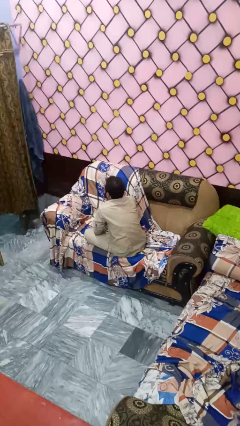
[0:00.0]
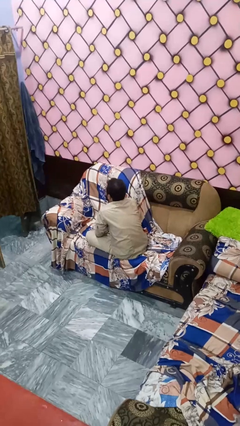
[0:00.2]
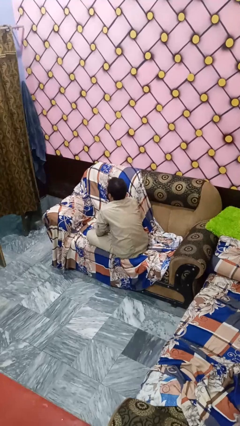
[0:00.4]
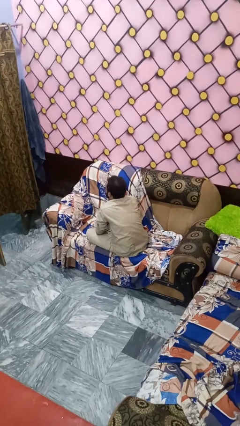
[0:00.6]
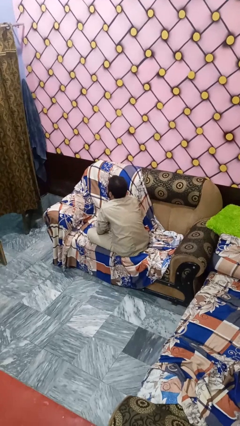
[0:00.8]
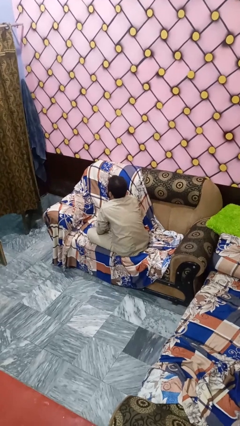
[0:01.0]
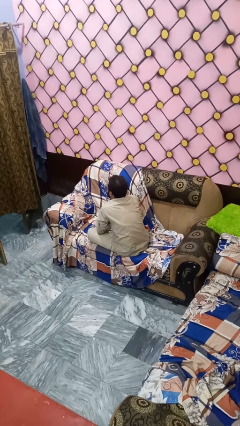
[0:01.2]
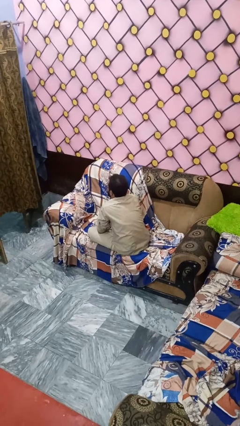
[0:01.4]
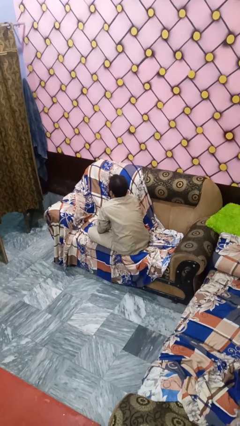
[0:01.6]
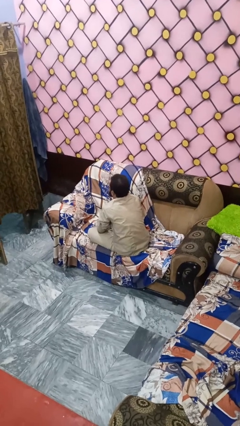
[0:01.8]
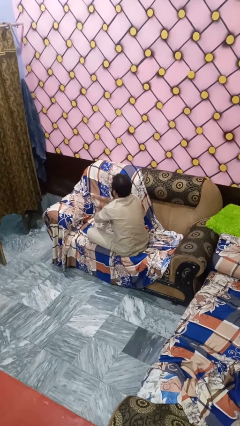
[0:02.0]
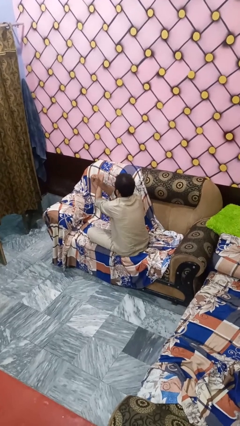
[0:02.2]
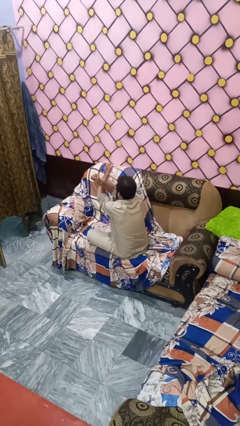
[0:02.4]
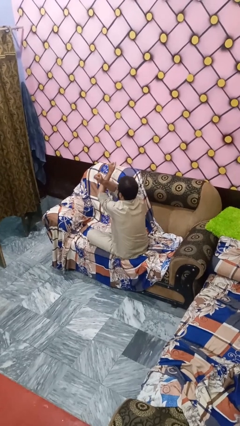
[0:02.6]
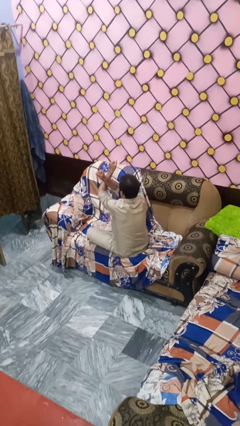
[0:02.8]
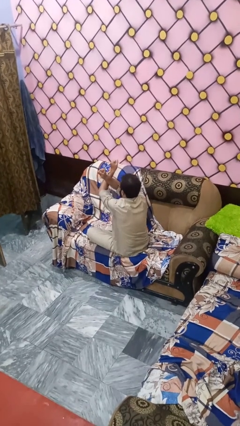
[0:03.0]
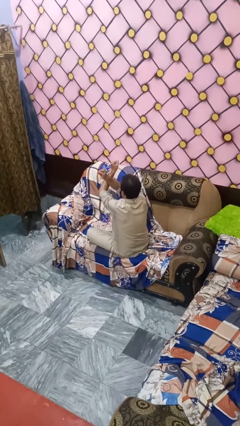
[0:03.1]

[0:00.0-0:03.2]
person gestures arms x

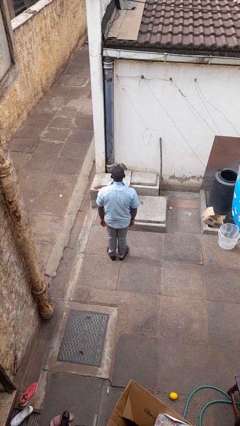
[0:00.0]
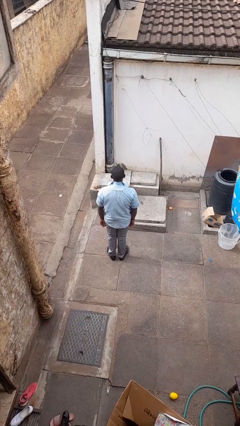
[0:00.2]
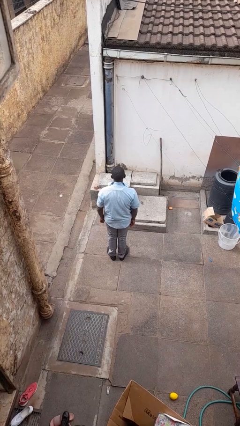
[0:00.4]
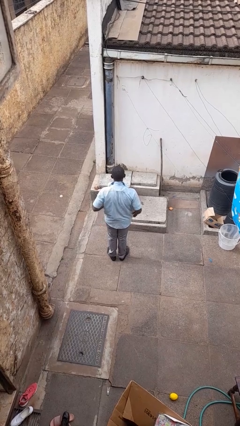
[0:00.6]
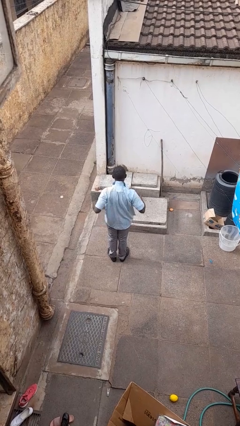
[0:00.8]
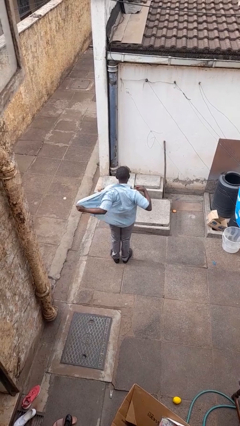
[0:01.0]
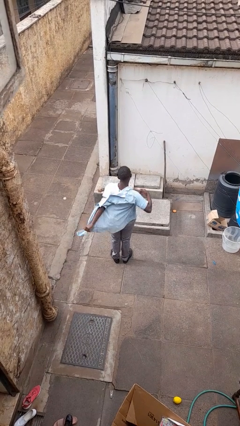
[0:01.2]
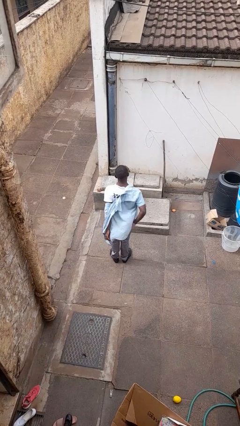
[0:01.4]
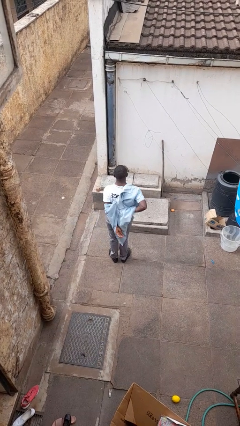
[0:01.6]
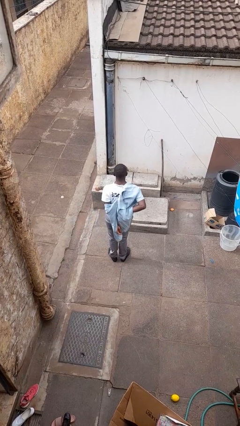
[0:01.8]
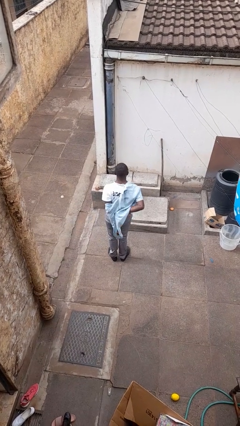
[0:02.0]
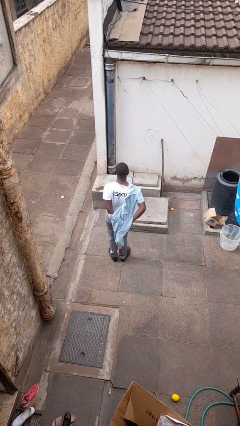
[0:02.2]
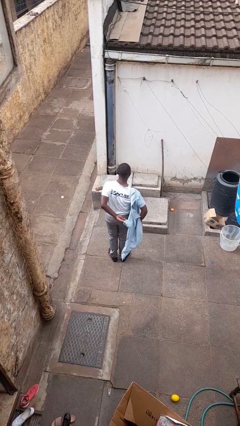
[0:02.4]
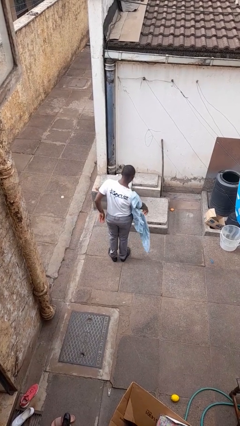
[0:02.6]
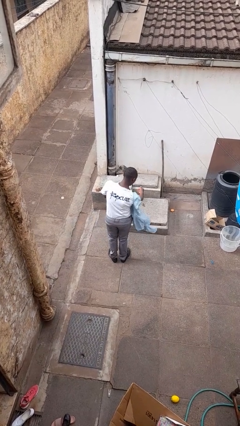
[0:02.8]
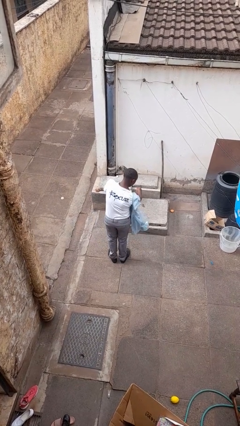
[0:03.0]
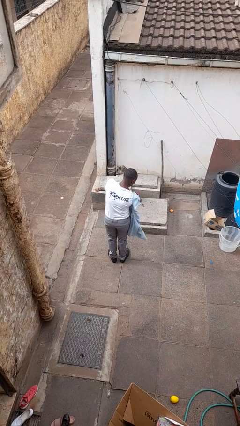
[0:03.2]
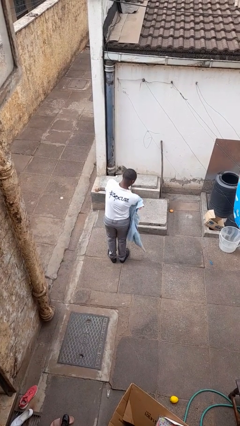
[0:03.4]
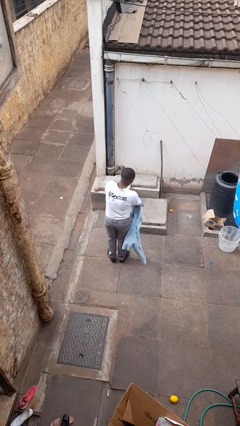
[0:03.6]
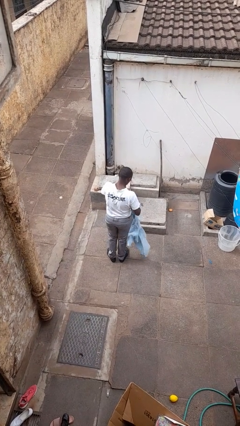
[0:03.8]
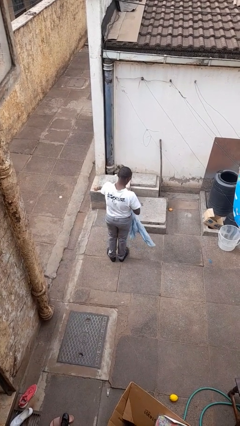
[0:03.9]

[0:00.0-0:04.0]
person takes off shirt

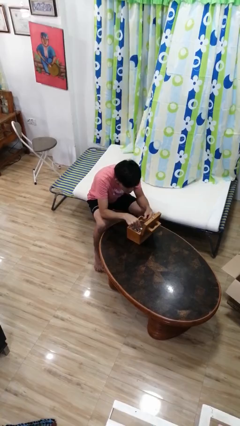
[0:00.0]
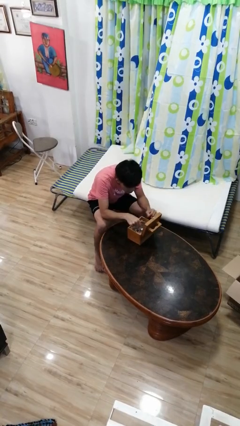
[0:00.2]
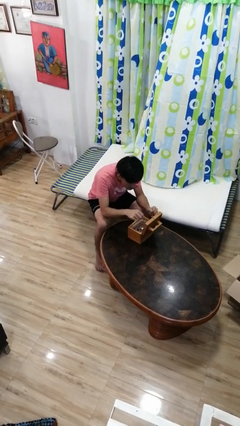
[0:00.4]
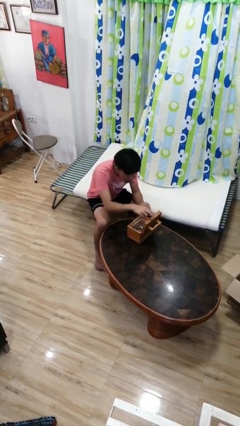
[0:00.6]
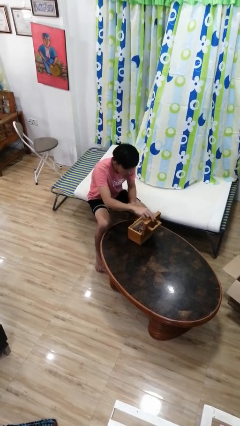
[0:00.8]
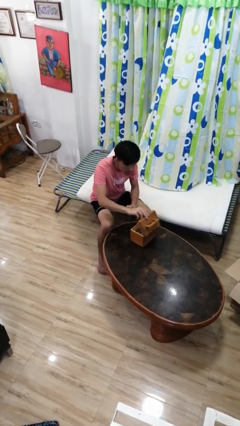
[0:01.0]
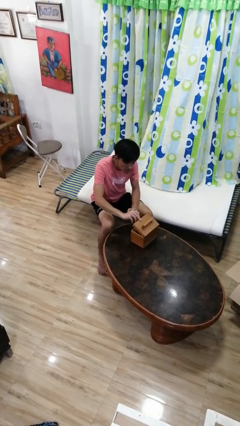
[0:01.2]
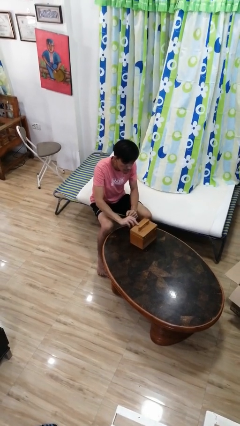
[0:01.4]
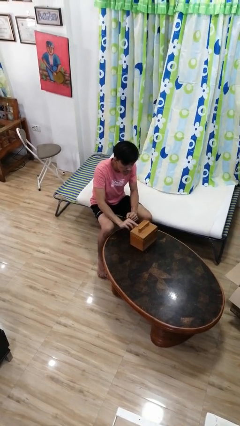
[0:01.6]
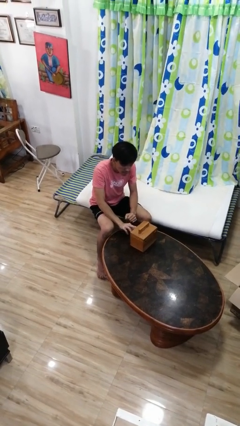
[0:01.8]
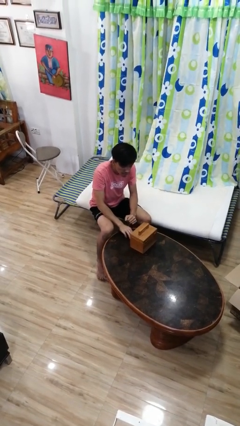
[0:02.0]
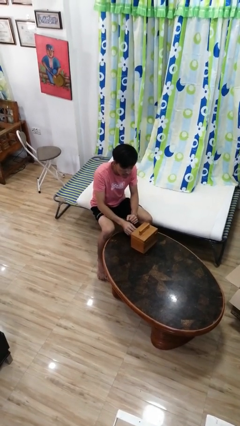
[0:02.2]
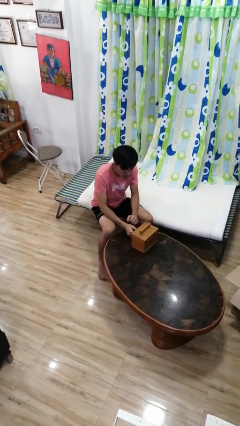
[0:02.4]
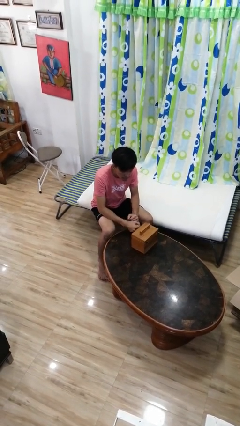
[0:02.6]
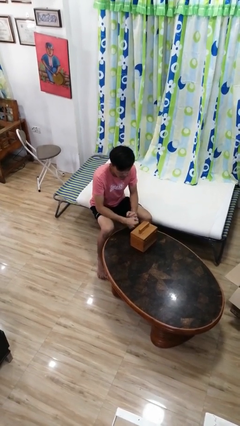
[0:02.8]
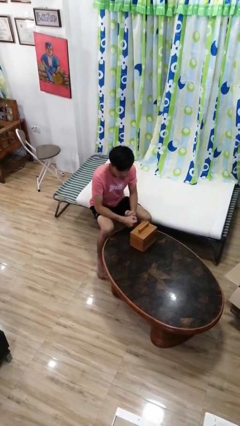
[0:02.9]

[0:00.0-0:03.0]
person closes jewelry box

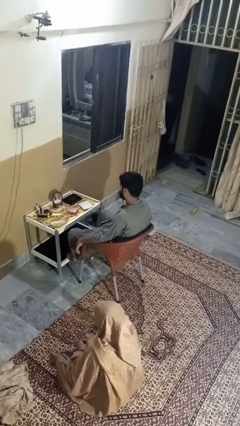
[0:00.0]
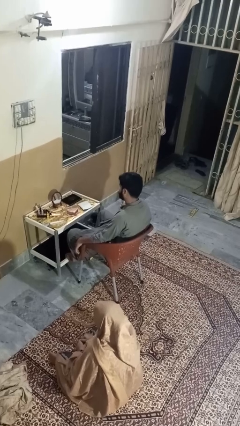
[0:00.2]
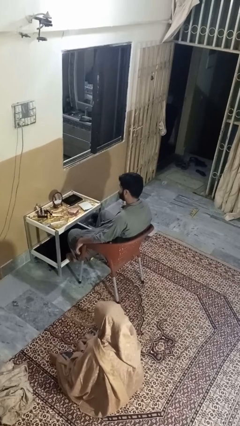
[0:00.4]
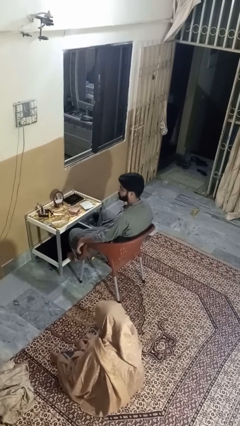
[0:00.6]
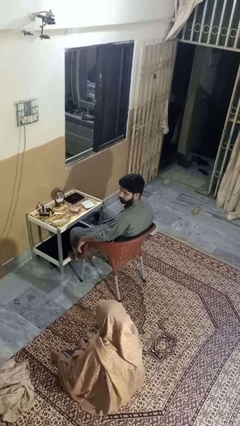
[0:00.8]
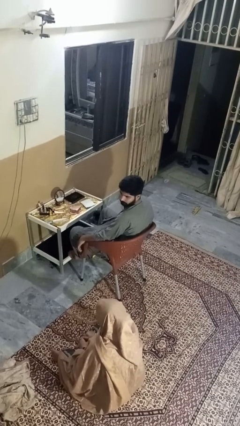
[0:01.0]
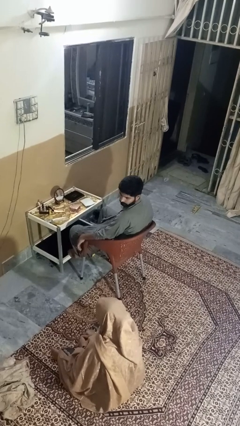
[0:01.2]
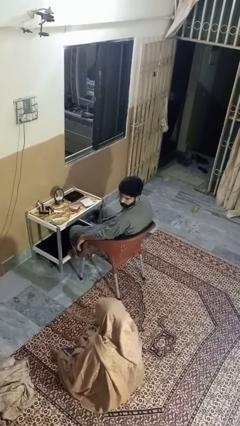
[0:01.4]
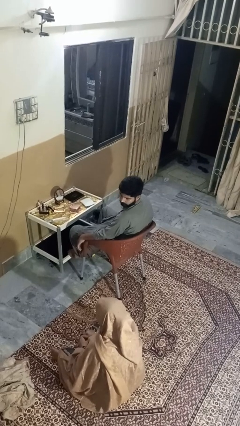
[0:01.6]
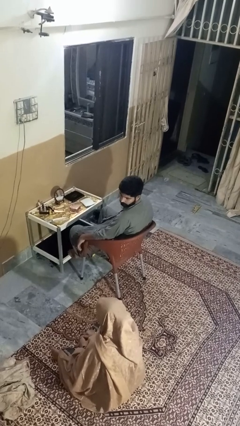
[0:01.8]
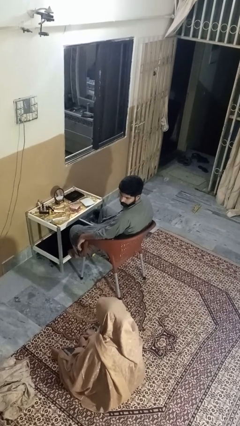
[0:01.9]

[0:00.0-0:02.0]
person looks over shoulder

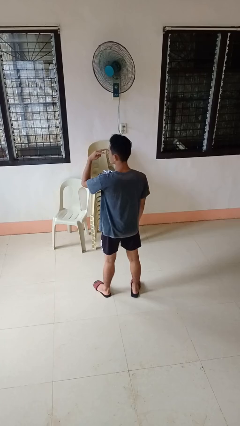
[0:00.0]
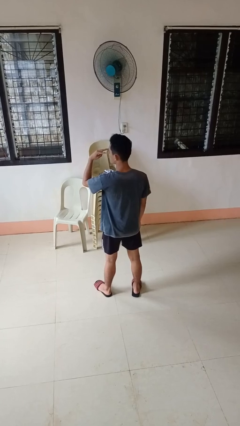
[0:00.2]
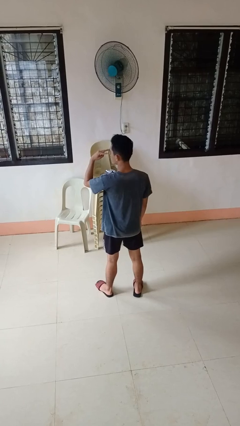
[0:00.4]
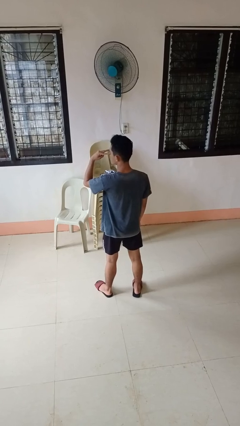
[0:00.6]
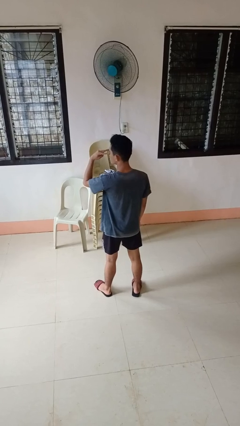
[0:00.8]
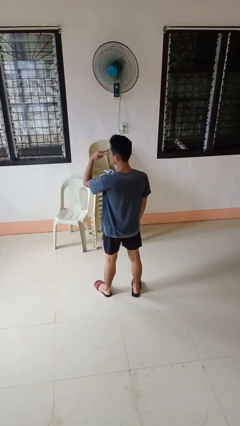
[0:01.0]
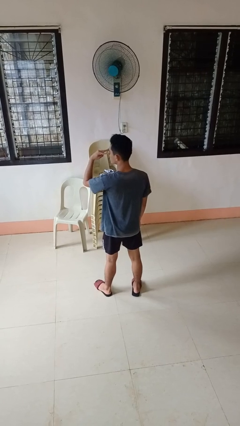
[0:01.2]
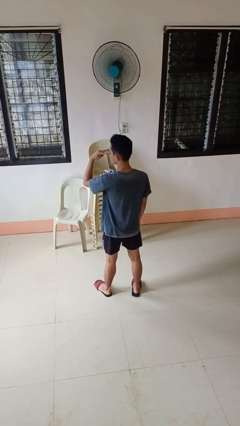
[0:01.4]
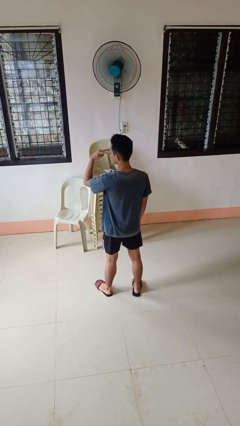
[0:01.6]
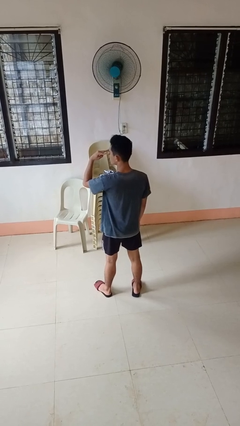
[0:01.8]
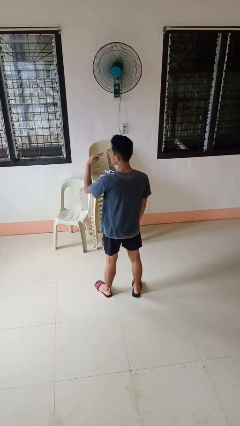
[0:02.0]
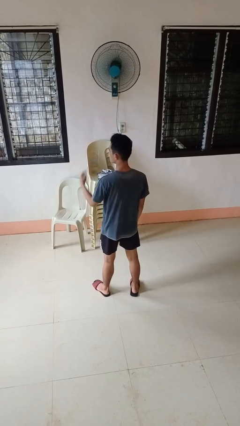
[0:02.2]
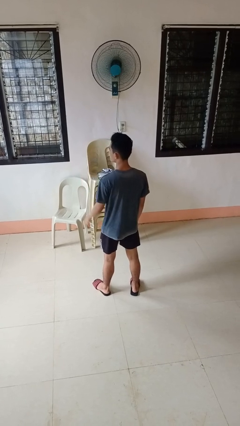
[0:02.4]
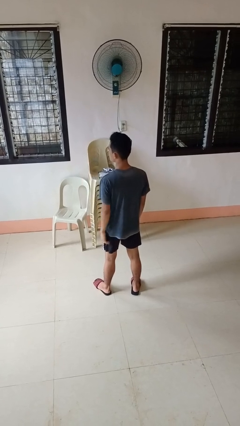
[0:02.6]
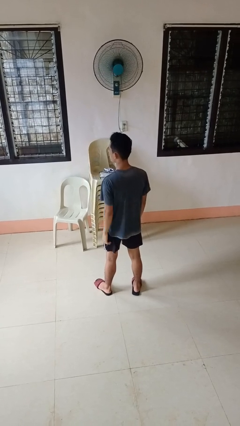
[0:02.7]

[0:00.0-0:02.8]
person gestures watch closely

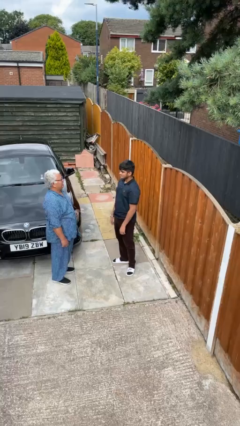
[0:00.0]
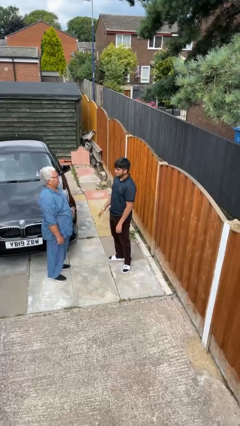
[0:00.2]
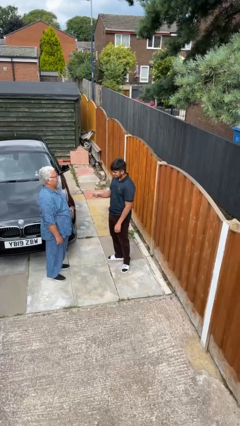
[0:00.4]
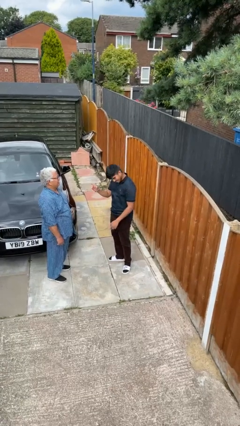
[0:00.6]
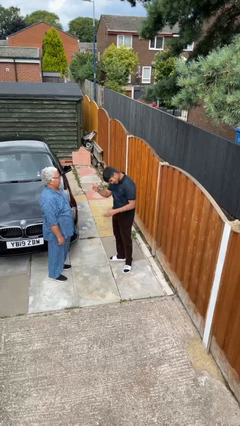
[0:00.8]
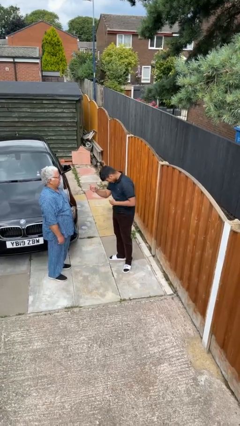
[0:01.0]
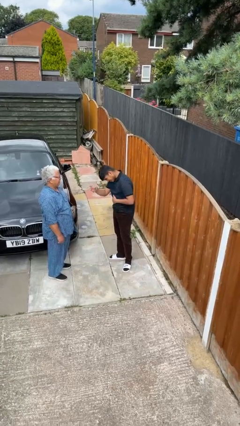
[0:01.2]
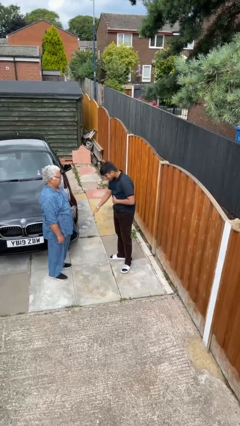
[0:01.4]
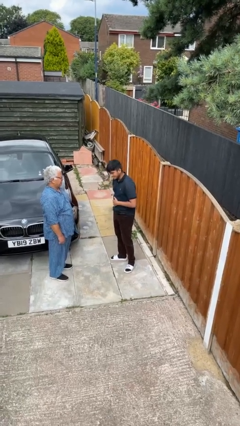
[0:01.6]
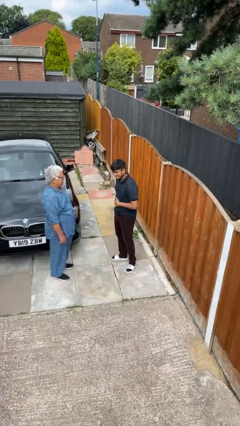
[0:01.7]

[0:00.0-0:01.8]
person laughs with person

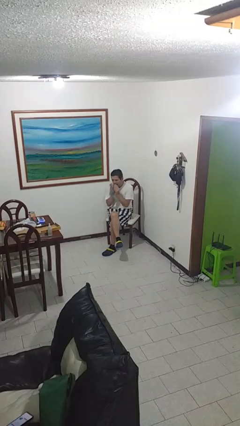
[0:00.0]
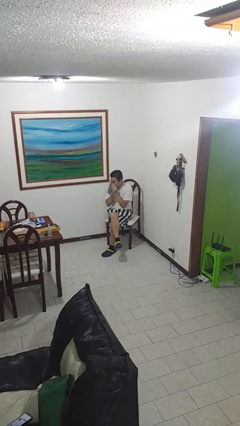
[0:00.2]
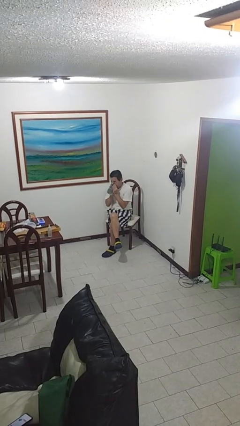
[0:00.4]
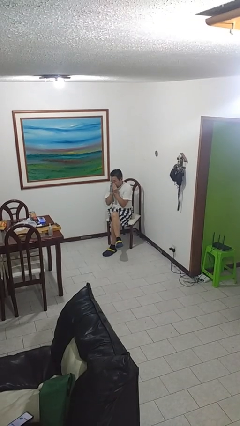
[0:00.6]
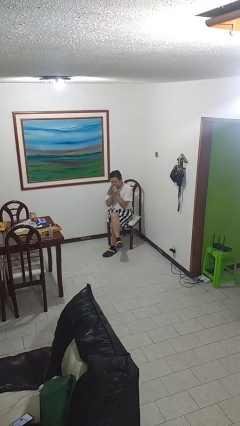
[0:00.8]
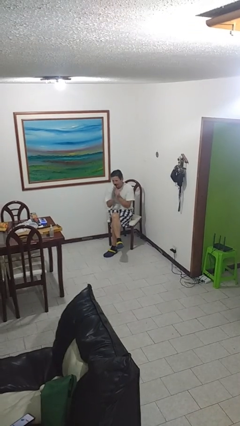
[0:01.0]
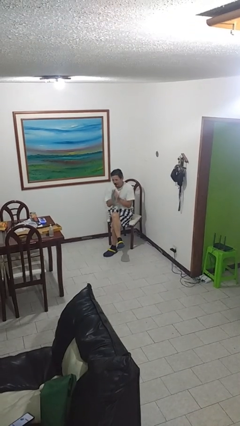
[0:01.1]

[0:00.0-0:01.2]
person blows nose
